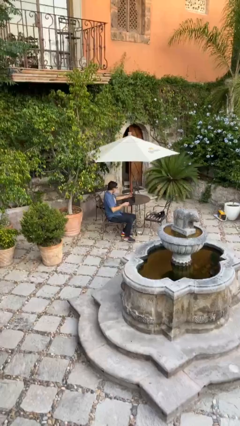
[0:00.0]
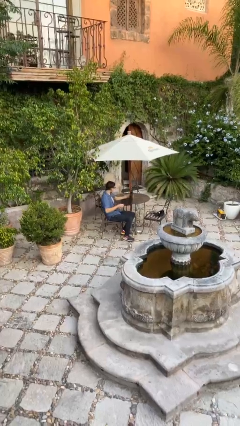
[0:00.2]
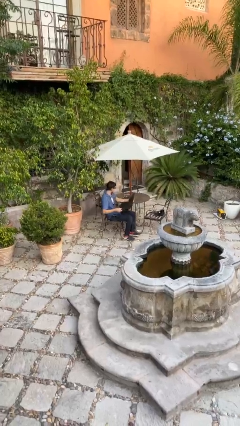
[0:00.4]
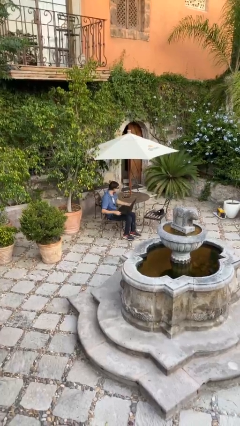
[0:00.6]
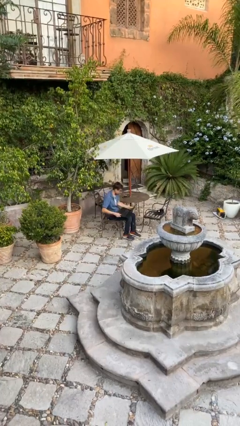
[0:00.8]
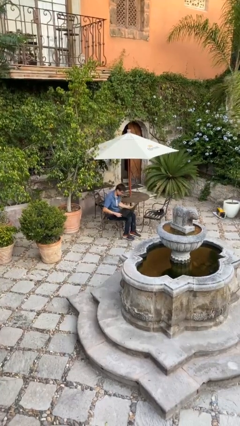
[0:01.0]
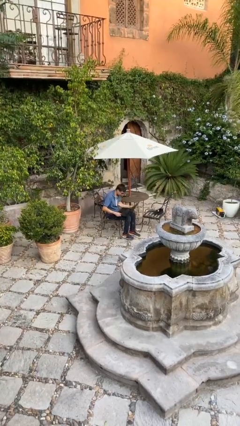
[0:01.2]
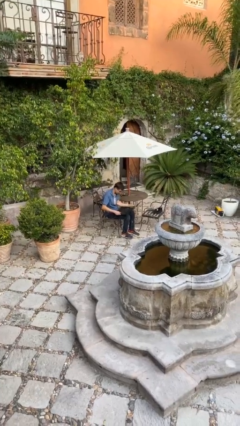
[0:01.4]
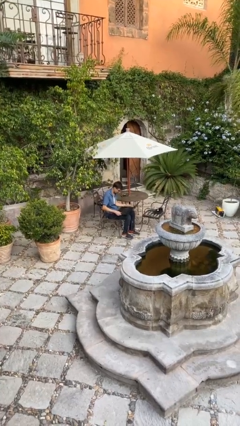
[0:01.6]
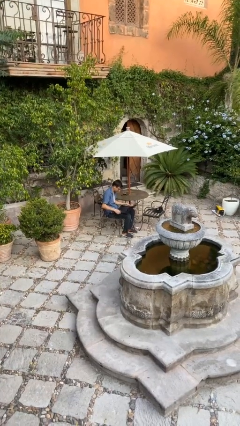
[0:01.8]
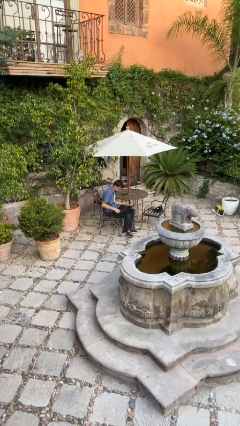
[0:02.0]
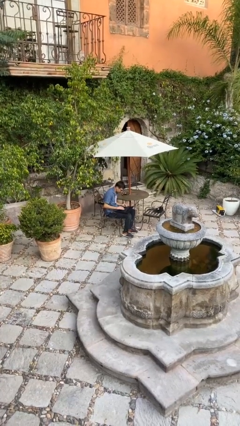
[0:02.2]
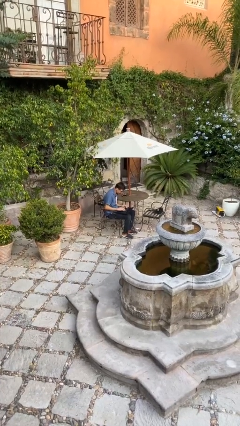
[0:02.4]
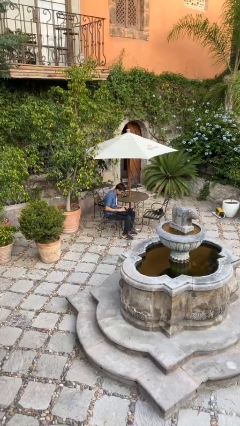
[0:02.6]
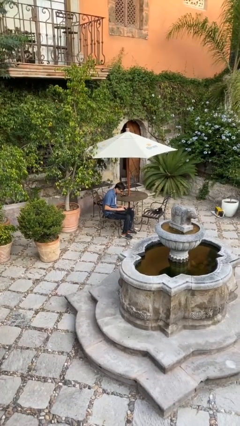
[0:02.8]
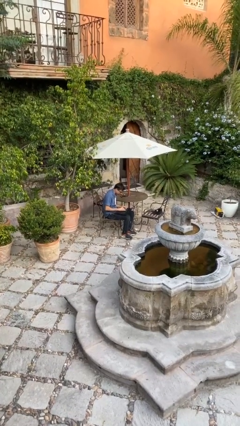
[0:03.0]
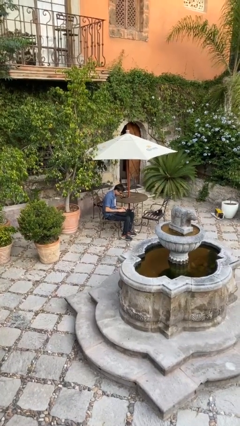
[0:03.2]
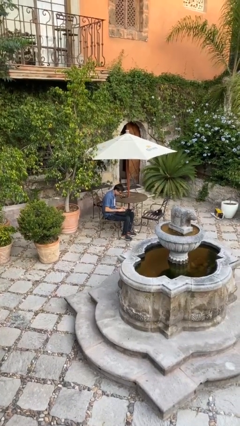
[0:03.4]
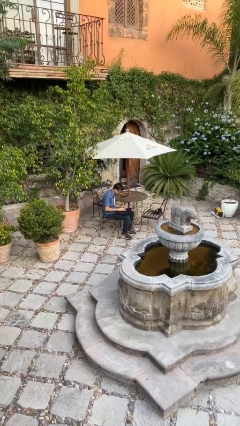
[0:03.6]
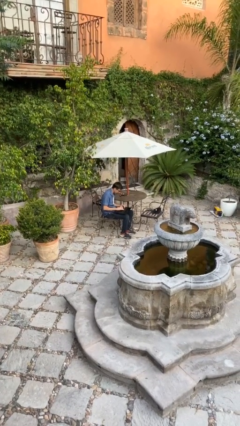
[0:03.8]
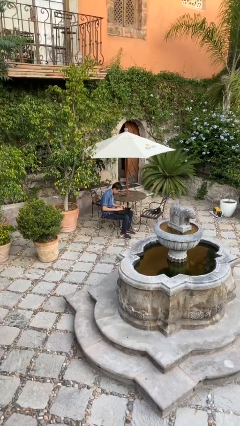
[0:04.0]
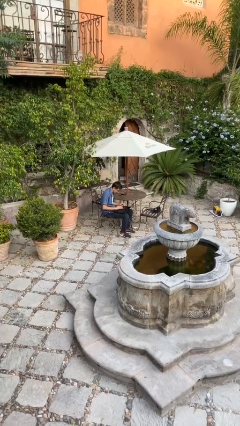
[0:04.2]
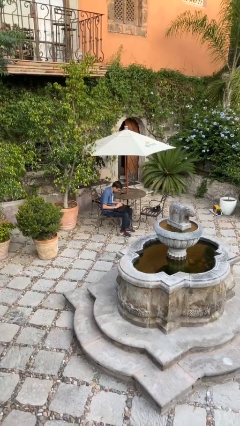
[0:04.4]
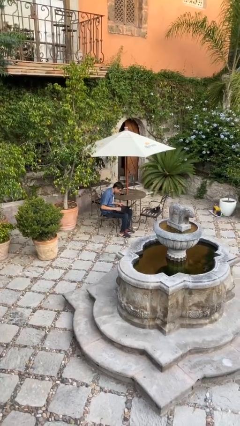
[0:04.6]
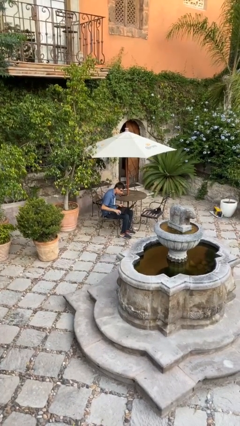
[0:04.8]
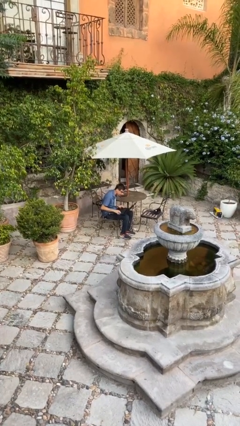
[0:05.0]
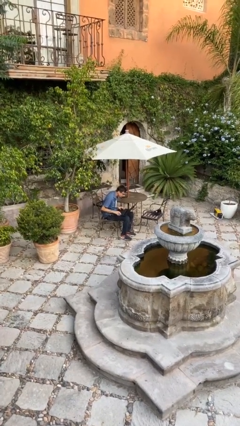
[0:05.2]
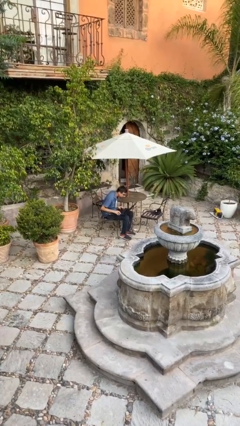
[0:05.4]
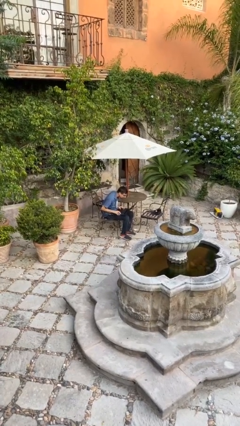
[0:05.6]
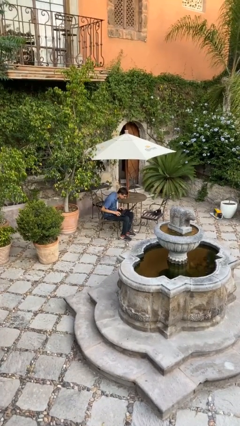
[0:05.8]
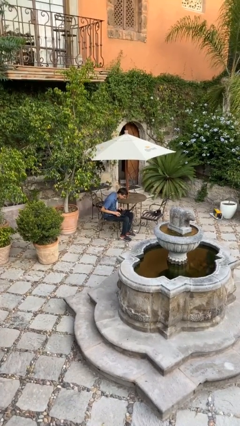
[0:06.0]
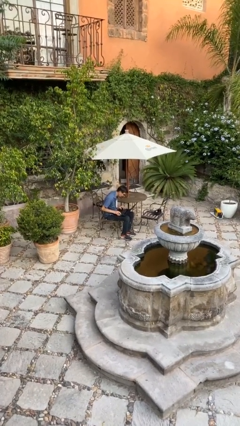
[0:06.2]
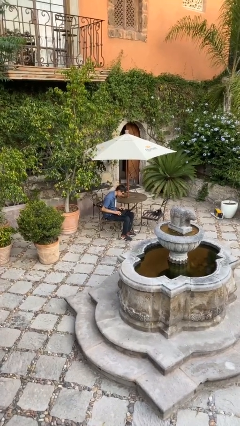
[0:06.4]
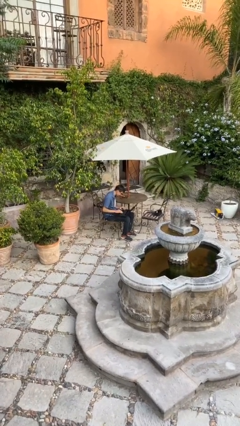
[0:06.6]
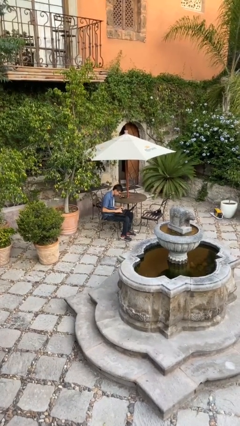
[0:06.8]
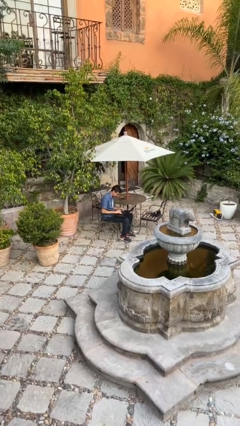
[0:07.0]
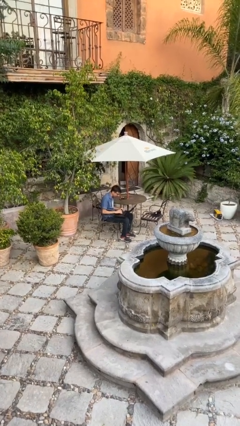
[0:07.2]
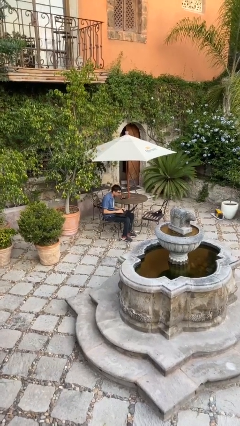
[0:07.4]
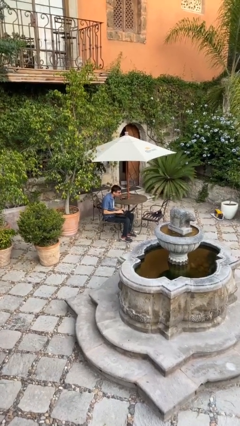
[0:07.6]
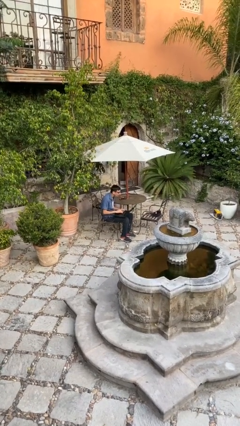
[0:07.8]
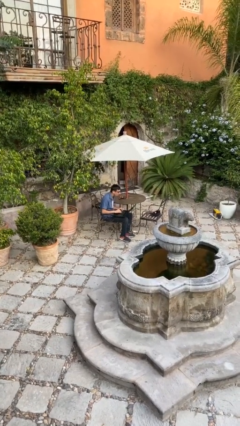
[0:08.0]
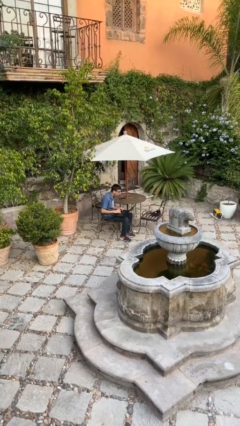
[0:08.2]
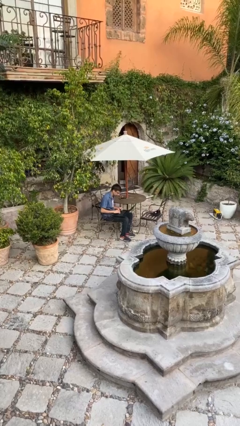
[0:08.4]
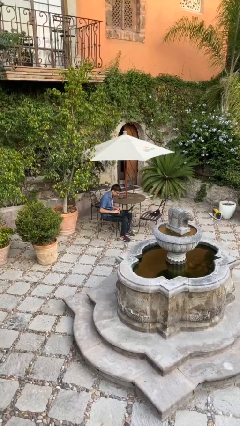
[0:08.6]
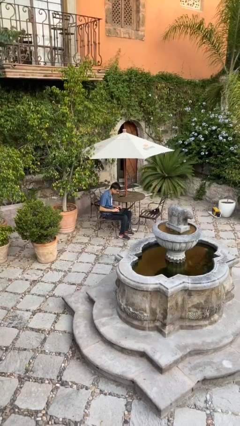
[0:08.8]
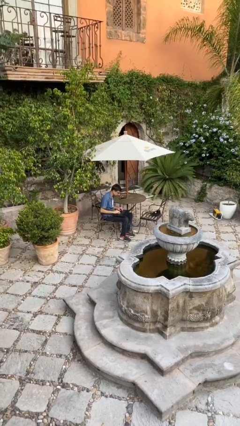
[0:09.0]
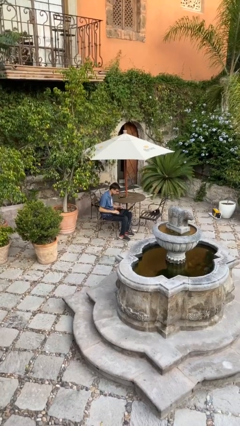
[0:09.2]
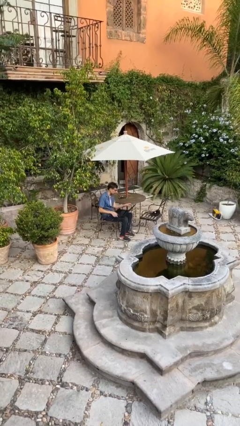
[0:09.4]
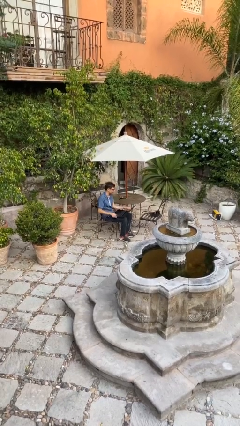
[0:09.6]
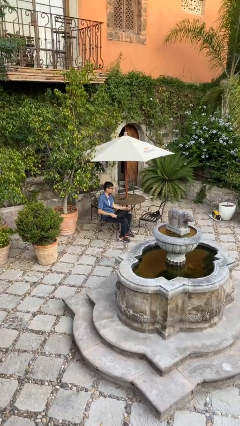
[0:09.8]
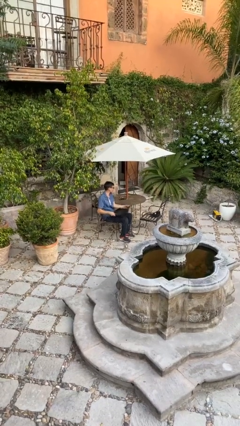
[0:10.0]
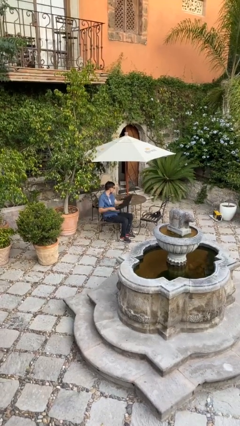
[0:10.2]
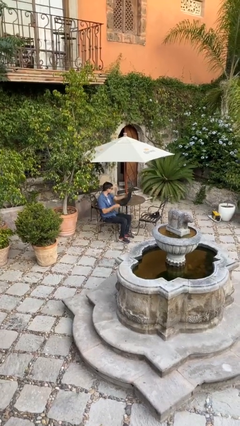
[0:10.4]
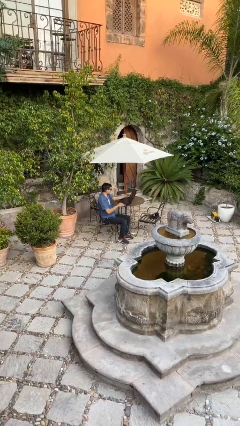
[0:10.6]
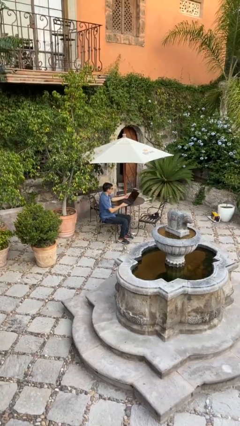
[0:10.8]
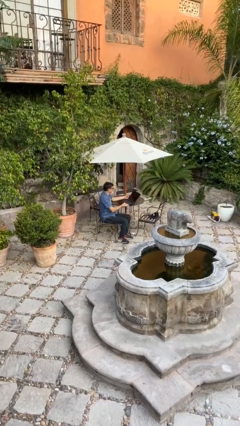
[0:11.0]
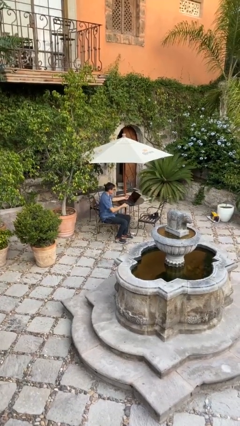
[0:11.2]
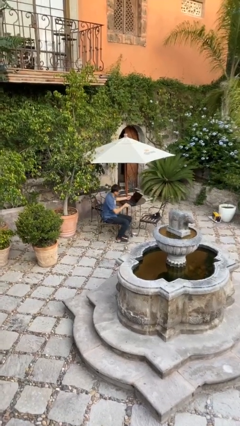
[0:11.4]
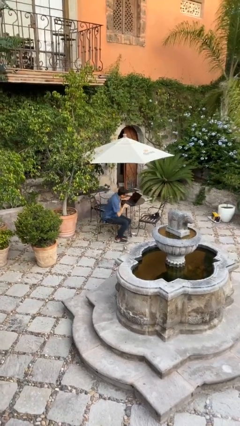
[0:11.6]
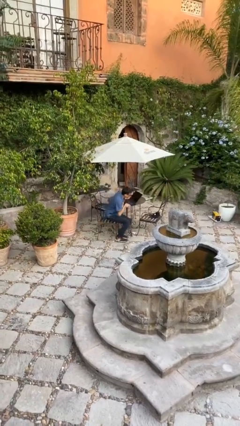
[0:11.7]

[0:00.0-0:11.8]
person interacts with laptop

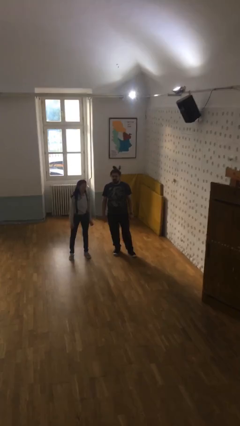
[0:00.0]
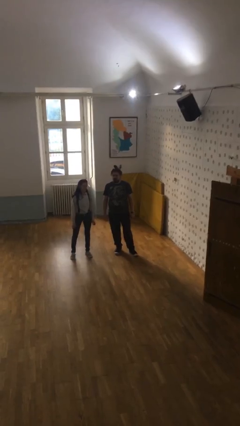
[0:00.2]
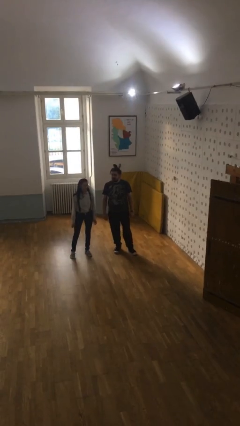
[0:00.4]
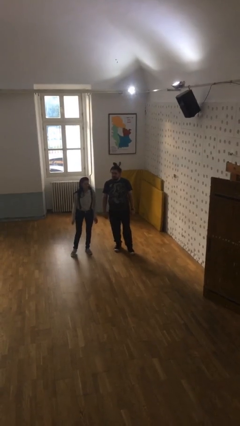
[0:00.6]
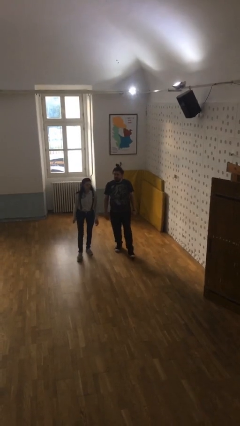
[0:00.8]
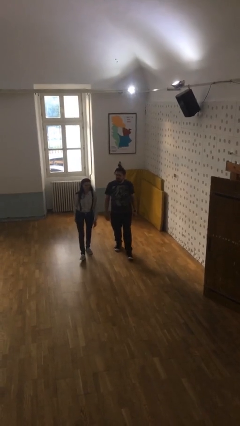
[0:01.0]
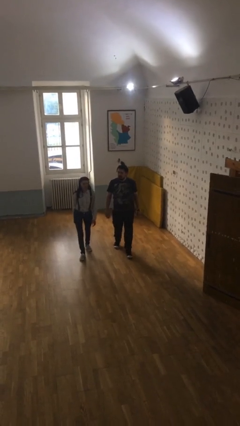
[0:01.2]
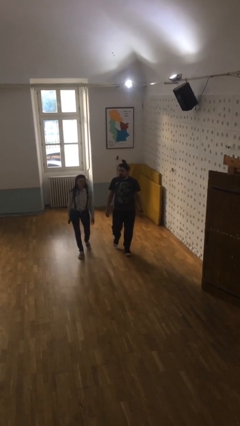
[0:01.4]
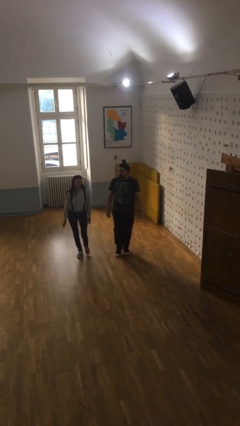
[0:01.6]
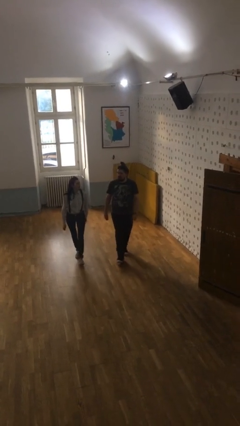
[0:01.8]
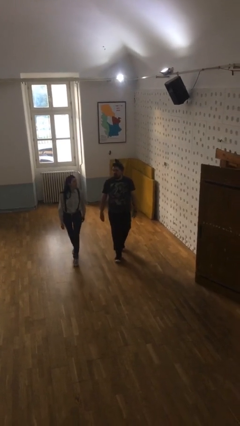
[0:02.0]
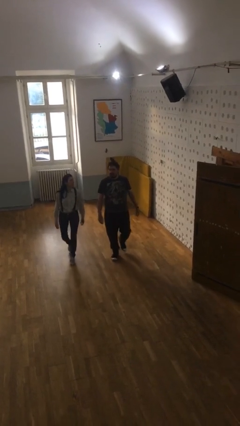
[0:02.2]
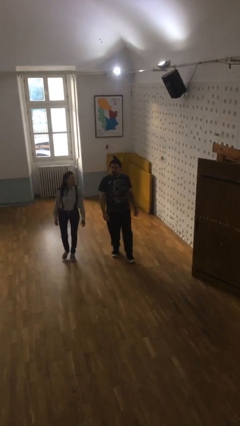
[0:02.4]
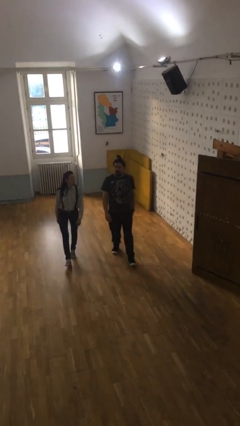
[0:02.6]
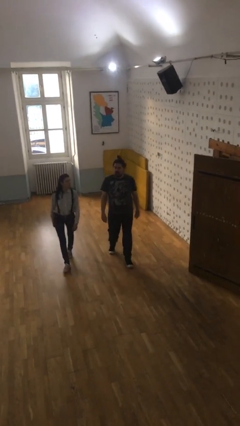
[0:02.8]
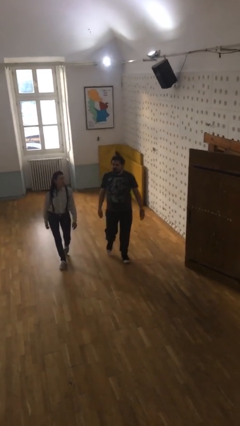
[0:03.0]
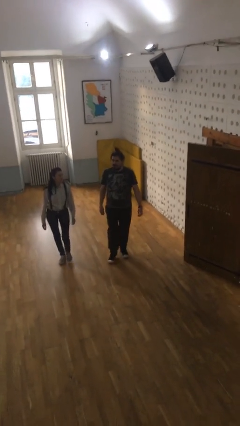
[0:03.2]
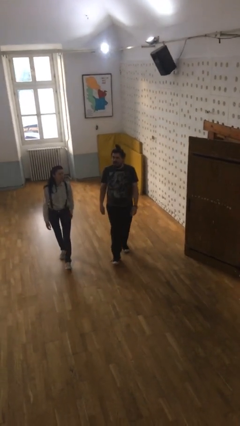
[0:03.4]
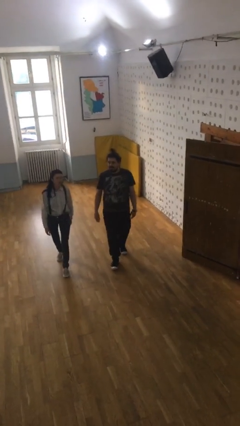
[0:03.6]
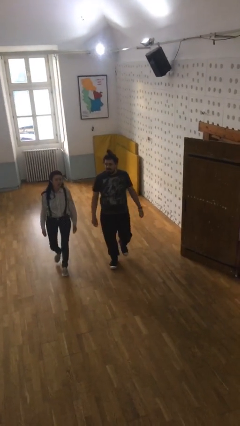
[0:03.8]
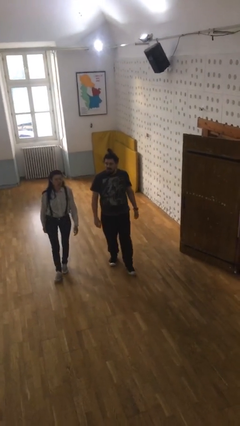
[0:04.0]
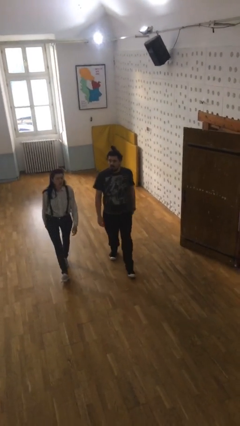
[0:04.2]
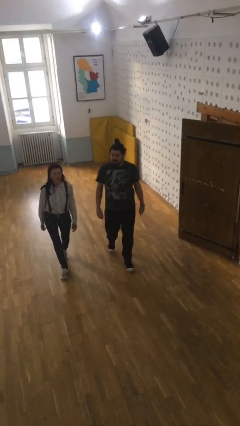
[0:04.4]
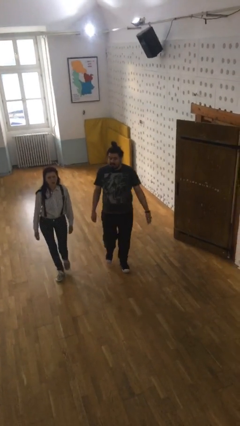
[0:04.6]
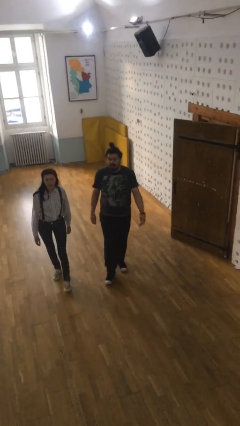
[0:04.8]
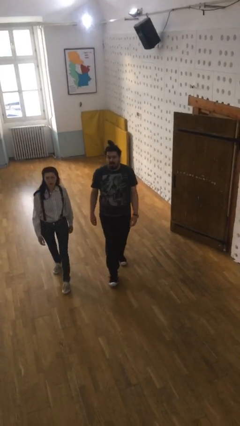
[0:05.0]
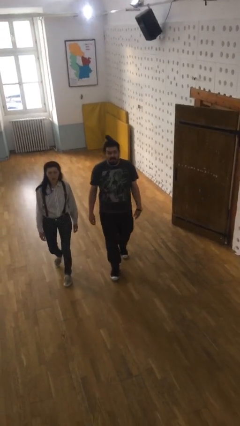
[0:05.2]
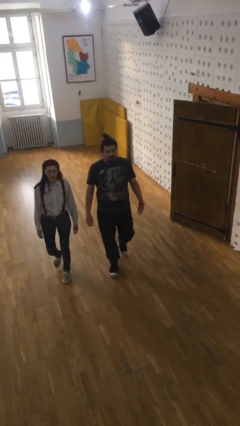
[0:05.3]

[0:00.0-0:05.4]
person talks to person
